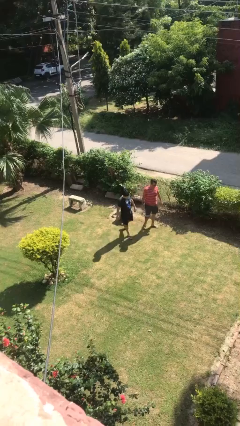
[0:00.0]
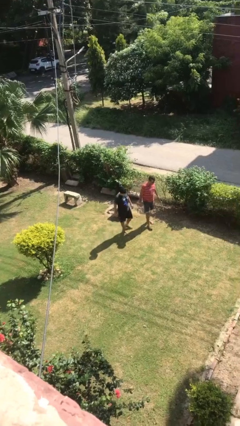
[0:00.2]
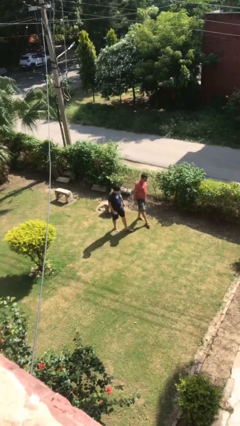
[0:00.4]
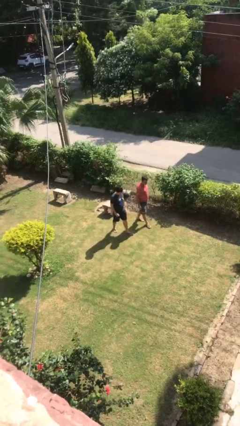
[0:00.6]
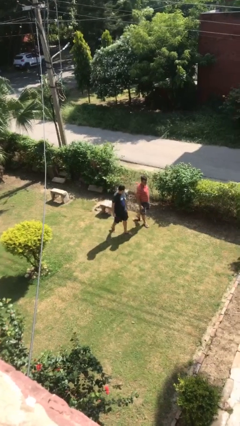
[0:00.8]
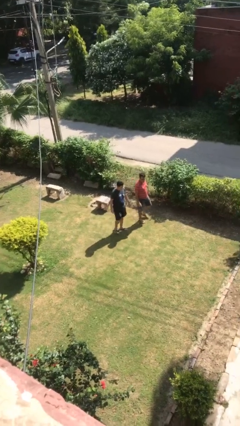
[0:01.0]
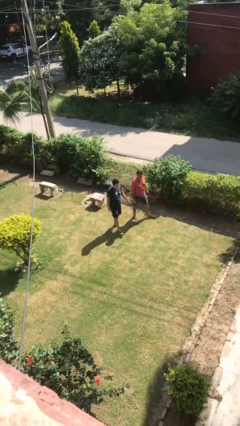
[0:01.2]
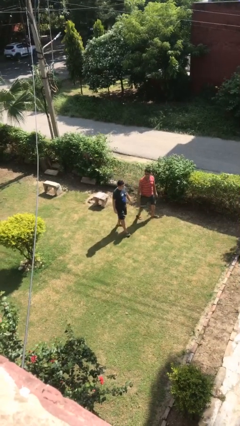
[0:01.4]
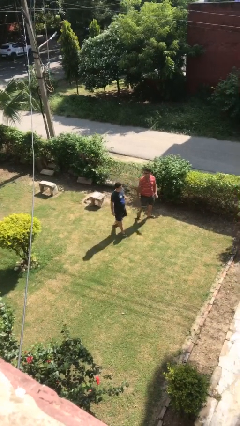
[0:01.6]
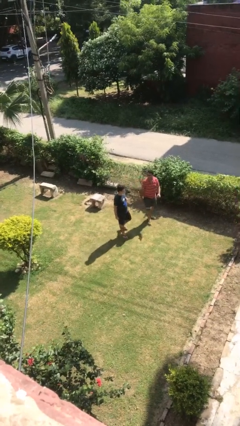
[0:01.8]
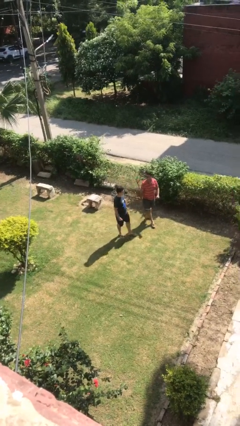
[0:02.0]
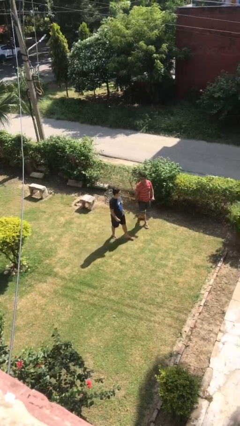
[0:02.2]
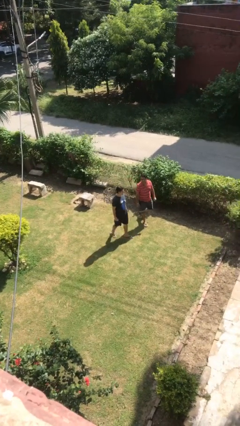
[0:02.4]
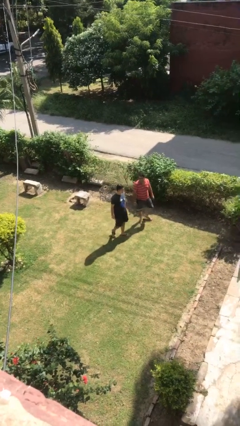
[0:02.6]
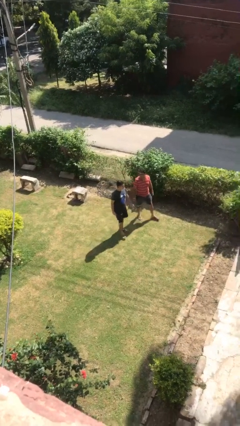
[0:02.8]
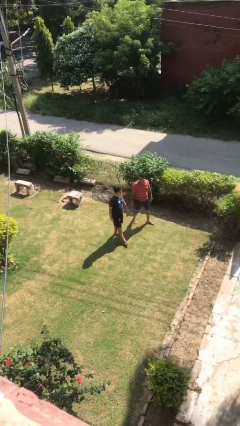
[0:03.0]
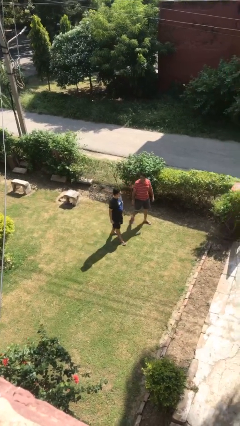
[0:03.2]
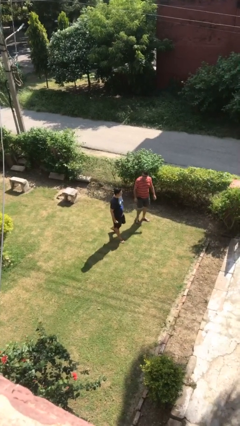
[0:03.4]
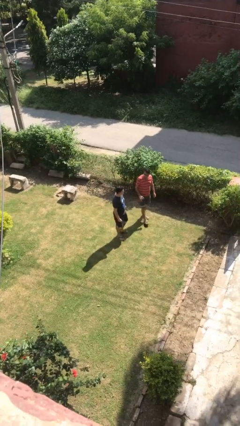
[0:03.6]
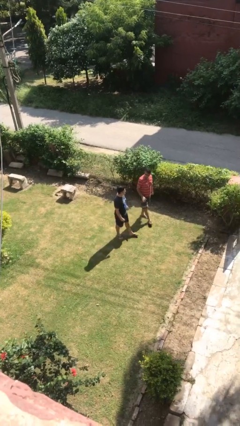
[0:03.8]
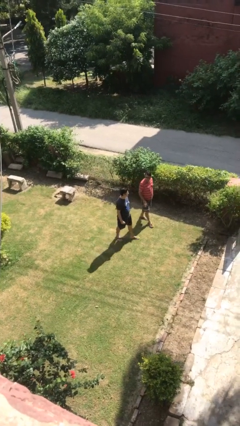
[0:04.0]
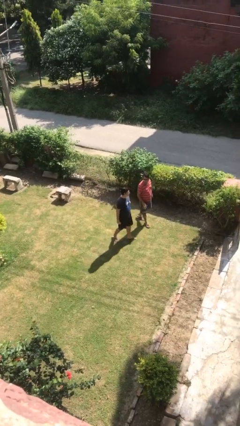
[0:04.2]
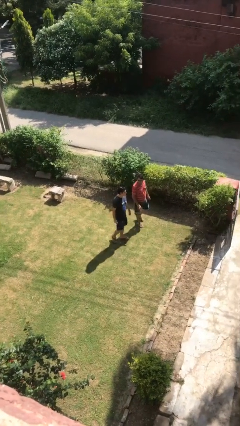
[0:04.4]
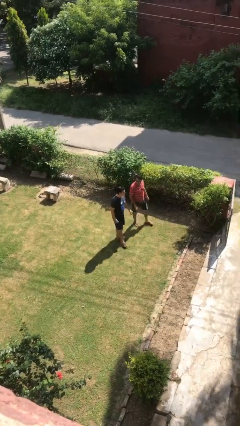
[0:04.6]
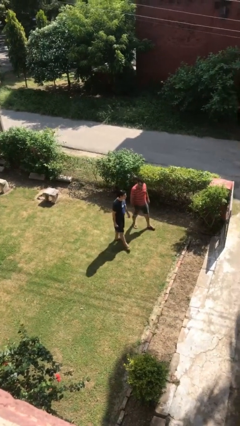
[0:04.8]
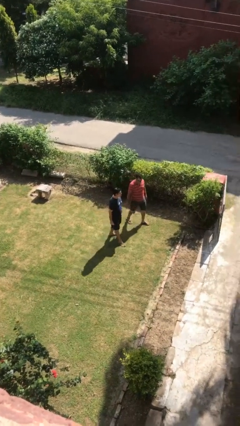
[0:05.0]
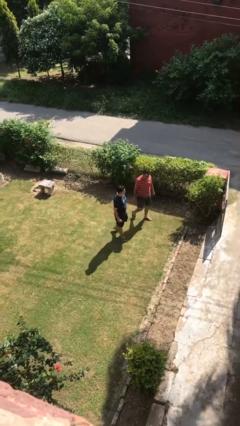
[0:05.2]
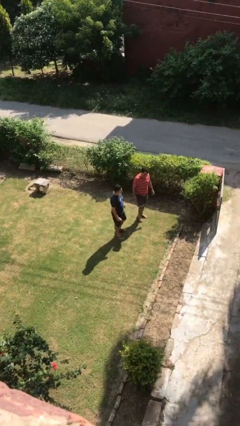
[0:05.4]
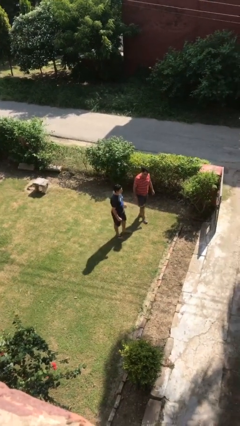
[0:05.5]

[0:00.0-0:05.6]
person talks to person

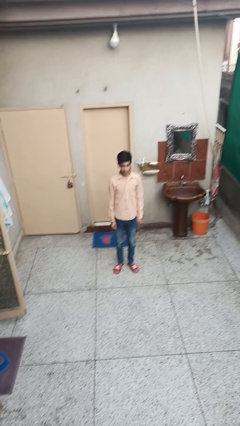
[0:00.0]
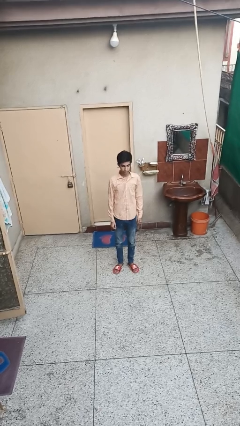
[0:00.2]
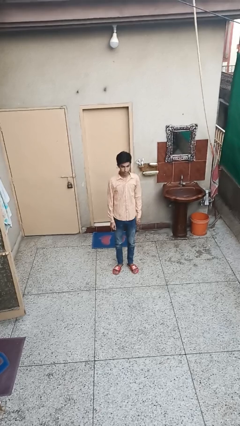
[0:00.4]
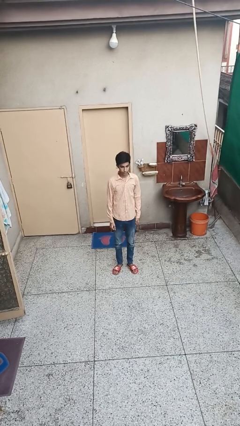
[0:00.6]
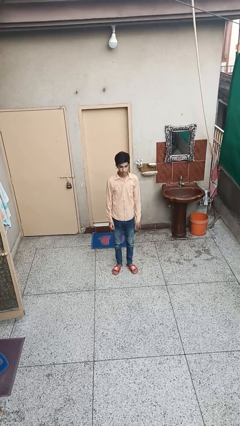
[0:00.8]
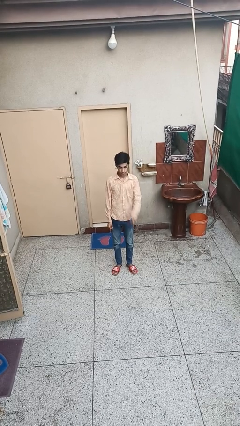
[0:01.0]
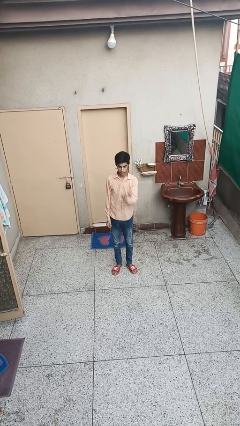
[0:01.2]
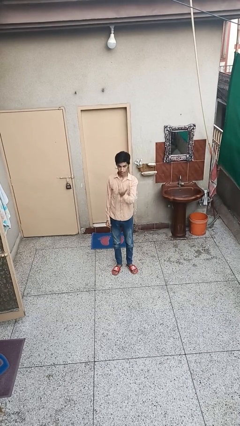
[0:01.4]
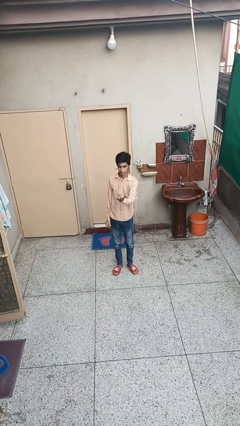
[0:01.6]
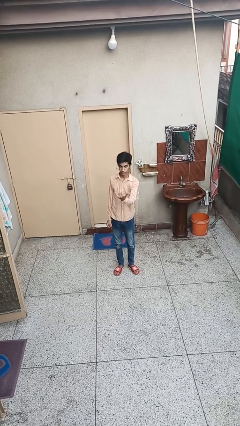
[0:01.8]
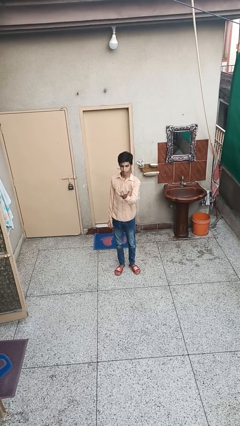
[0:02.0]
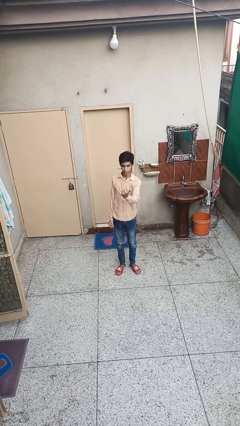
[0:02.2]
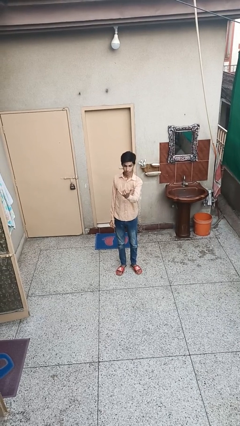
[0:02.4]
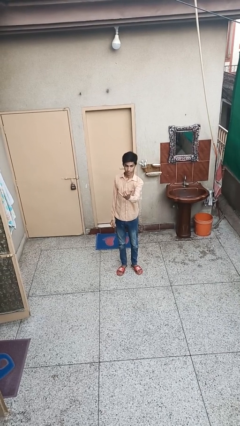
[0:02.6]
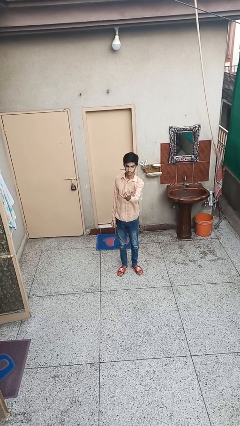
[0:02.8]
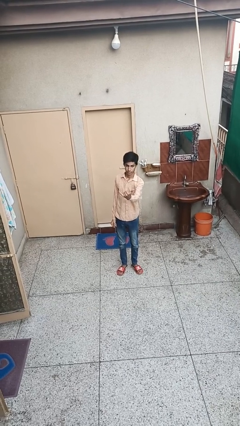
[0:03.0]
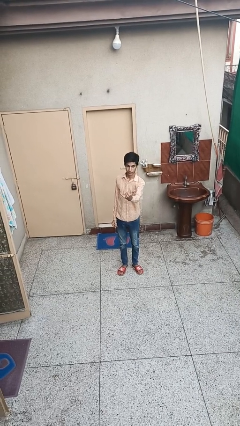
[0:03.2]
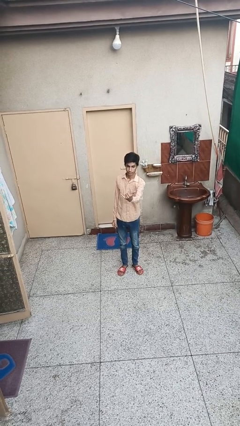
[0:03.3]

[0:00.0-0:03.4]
person gestures hang loose

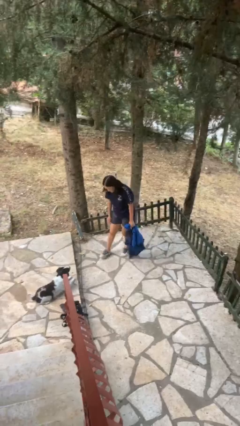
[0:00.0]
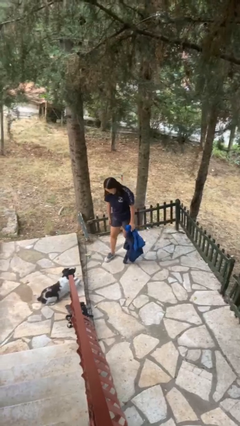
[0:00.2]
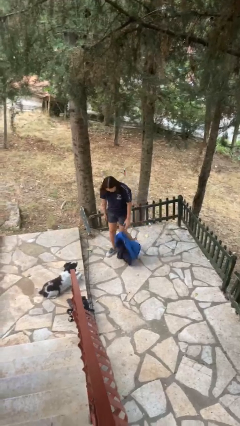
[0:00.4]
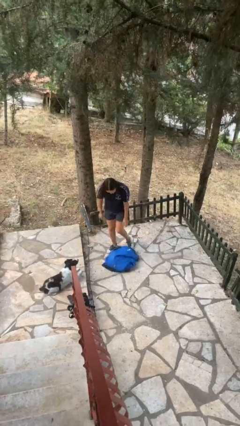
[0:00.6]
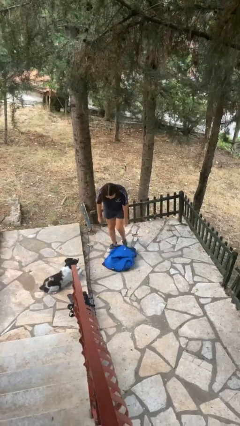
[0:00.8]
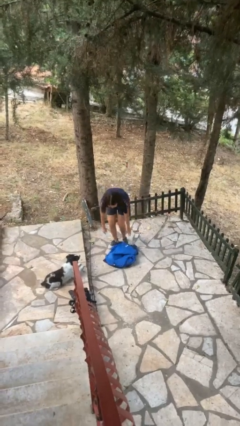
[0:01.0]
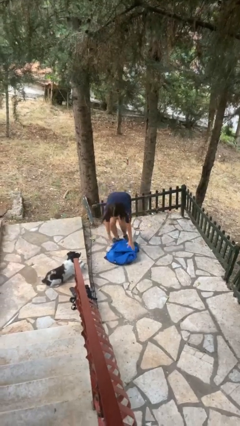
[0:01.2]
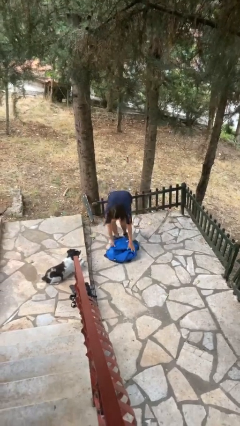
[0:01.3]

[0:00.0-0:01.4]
person drops object

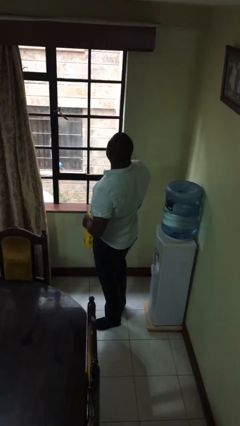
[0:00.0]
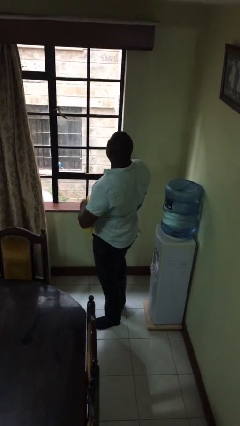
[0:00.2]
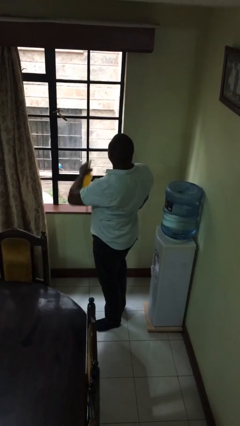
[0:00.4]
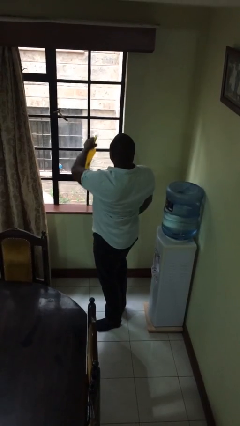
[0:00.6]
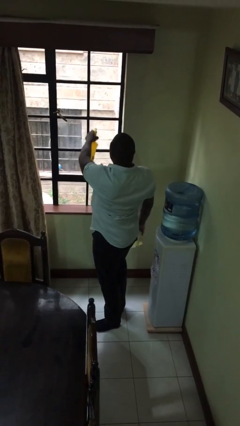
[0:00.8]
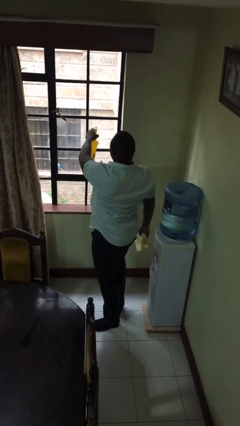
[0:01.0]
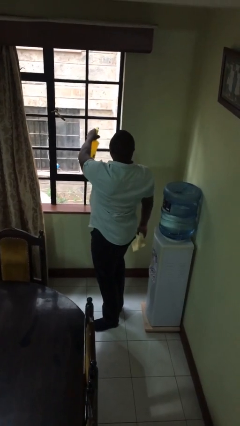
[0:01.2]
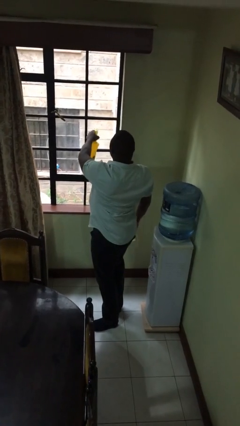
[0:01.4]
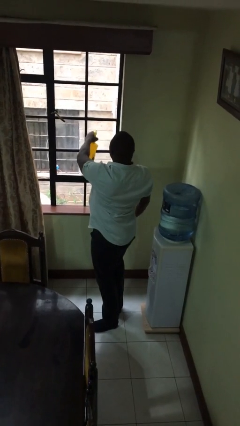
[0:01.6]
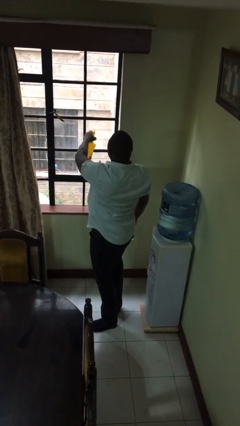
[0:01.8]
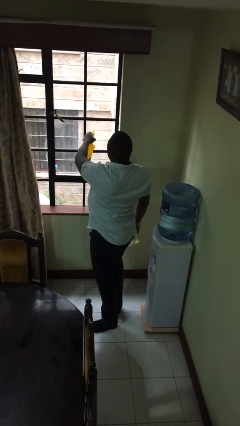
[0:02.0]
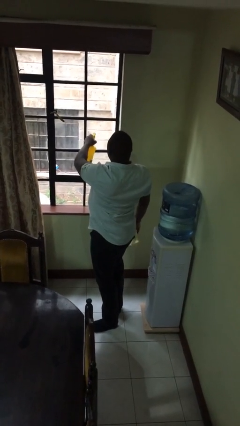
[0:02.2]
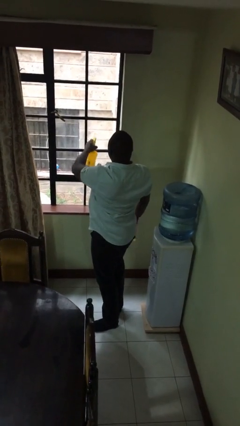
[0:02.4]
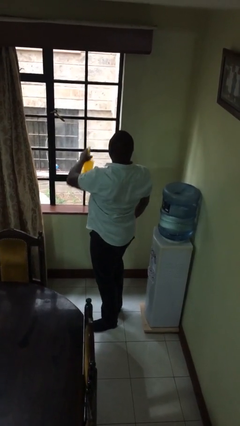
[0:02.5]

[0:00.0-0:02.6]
person sprays from bottle

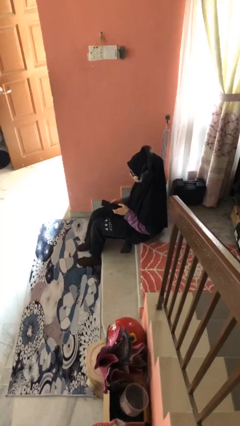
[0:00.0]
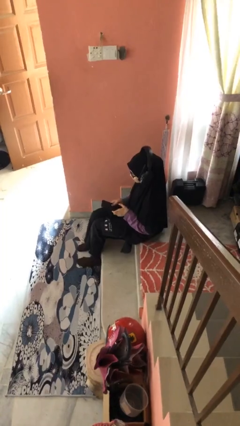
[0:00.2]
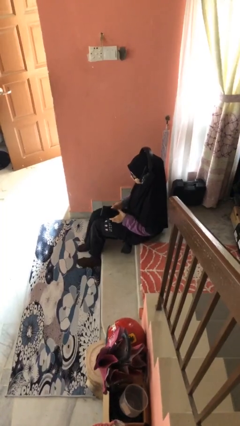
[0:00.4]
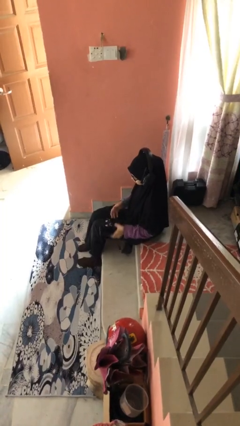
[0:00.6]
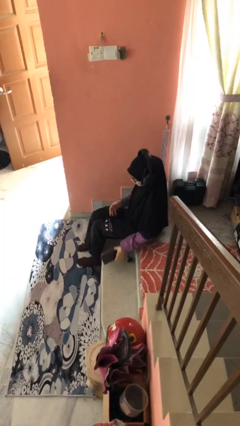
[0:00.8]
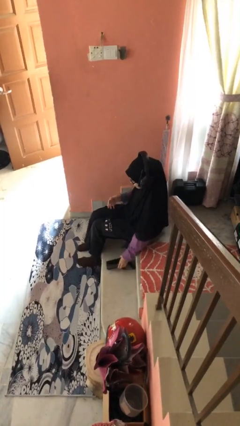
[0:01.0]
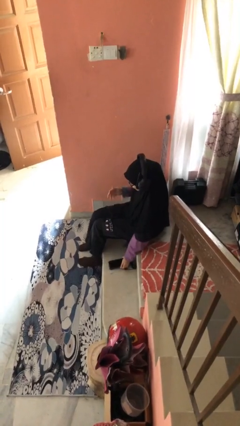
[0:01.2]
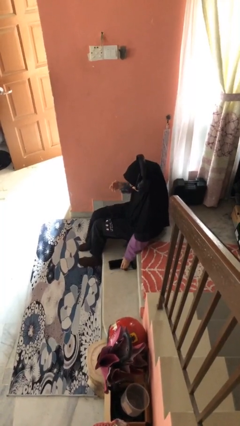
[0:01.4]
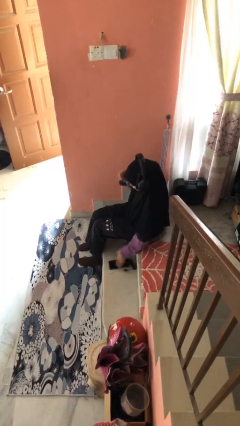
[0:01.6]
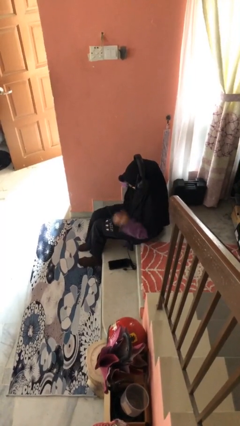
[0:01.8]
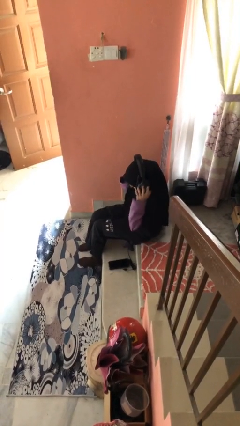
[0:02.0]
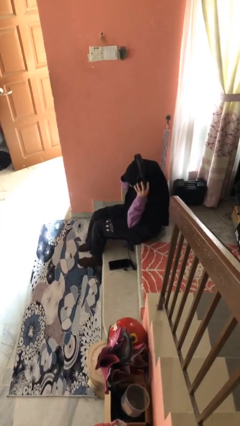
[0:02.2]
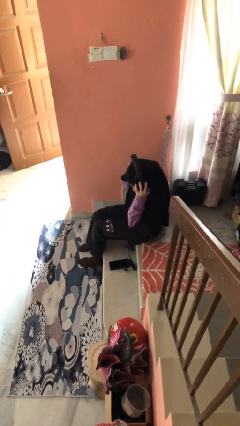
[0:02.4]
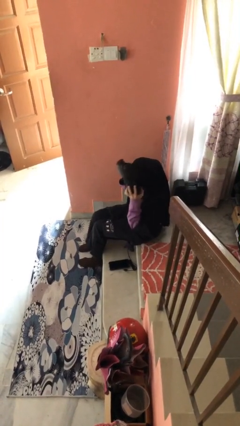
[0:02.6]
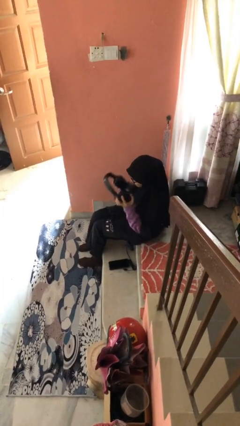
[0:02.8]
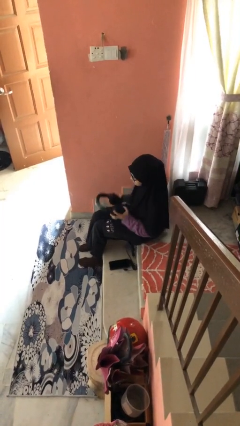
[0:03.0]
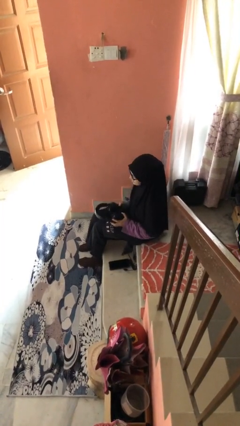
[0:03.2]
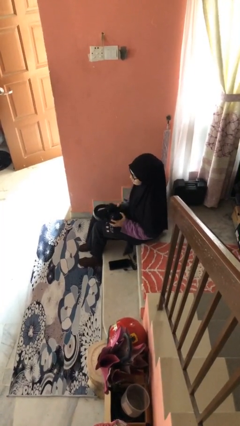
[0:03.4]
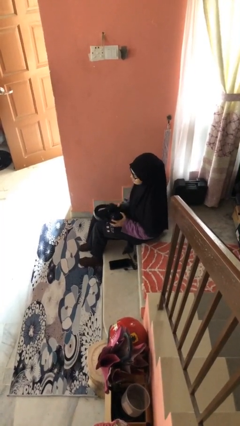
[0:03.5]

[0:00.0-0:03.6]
person takes off headphones

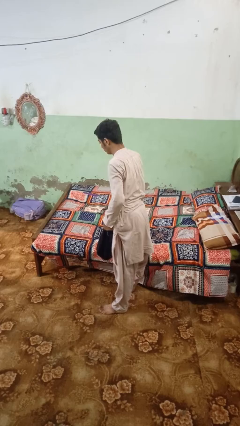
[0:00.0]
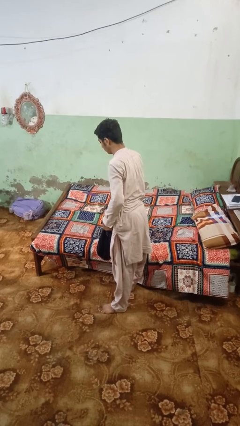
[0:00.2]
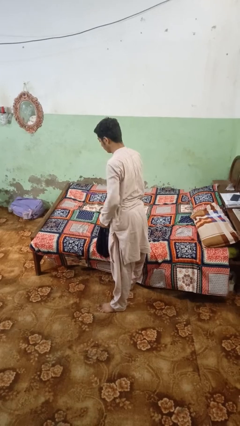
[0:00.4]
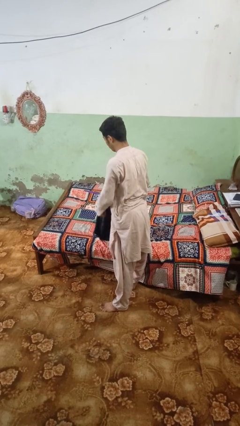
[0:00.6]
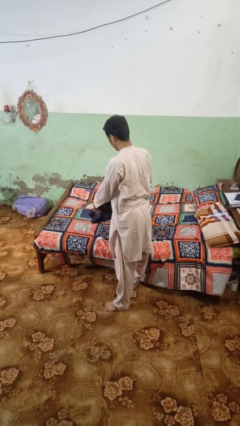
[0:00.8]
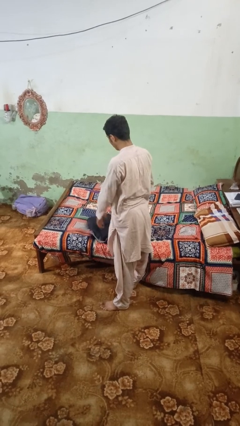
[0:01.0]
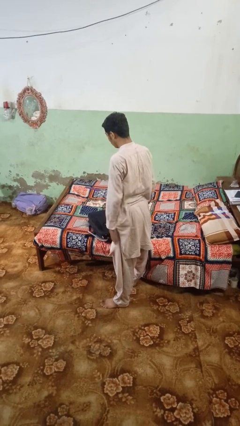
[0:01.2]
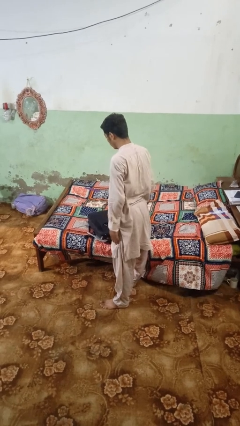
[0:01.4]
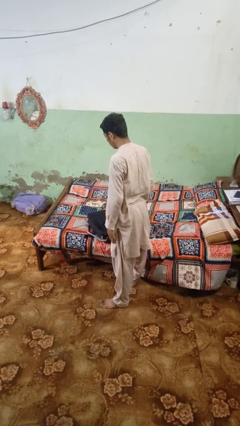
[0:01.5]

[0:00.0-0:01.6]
person puts down object on bed
